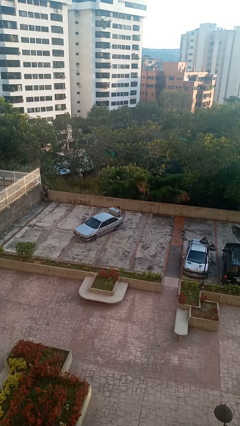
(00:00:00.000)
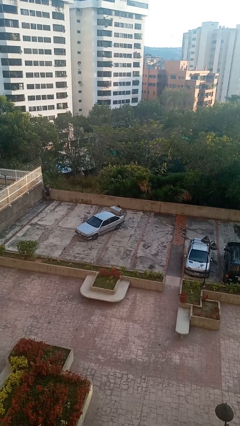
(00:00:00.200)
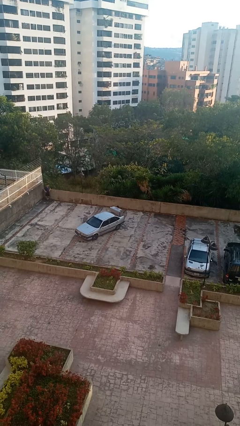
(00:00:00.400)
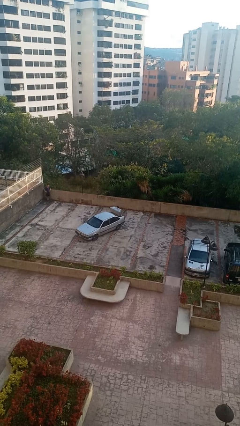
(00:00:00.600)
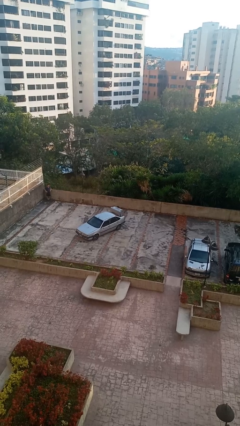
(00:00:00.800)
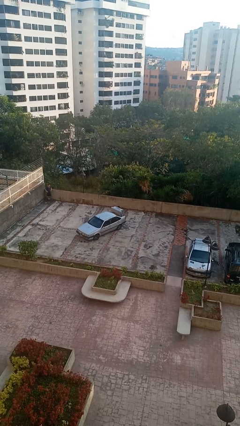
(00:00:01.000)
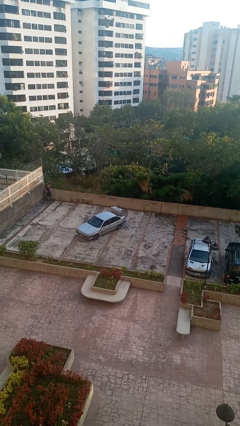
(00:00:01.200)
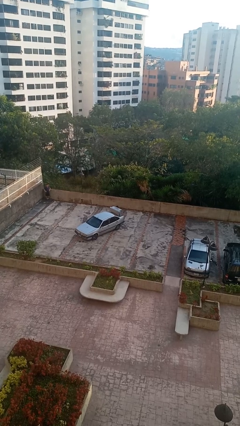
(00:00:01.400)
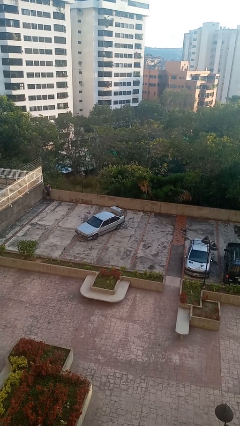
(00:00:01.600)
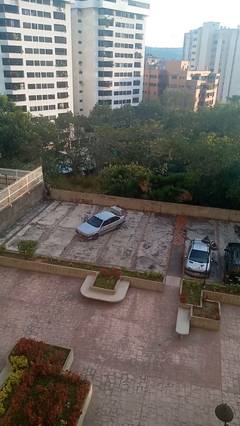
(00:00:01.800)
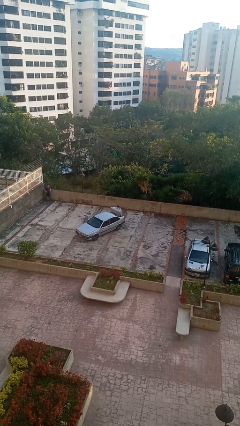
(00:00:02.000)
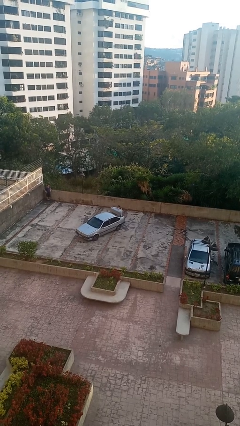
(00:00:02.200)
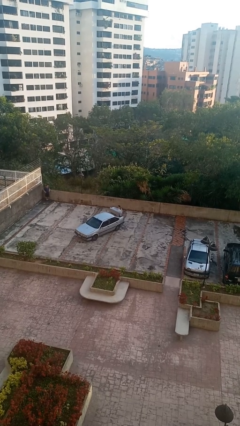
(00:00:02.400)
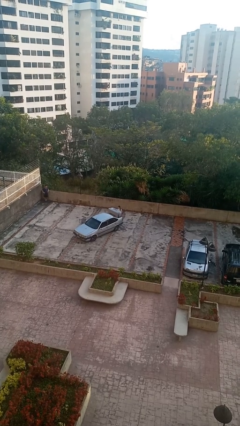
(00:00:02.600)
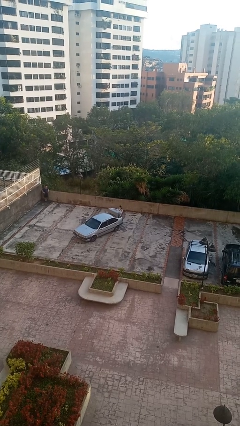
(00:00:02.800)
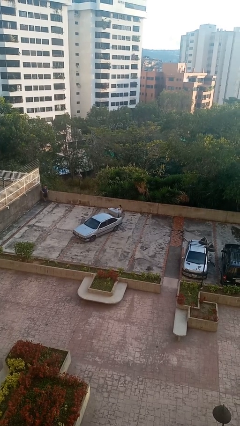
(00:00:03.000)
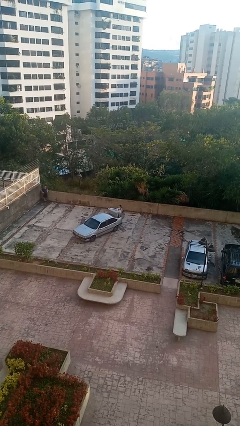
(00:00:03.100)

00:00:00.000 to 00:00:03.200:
person unloads car

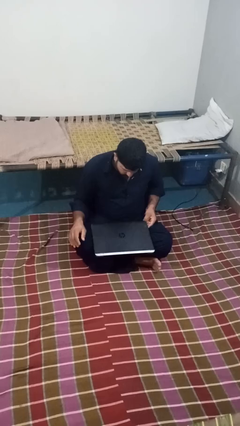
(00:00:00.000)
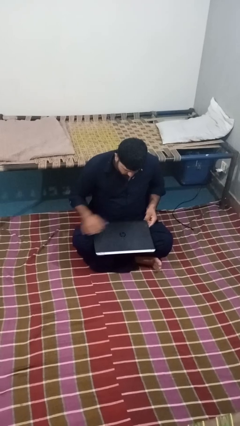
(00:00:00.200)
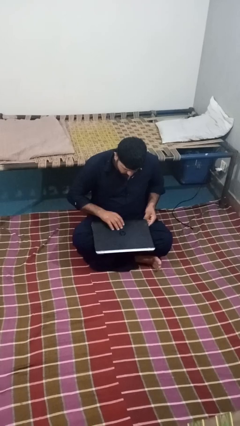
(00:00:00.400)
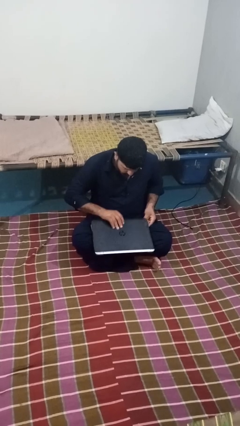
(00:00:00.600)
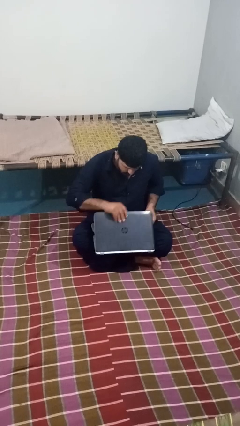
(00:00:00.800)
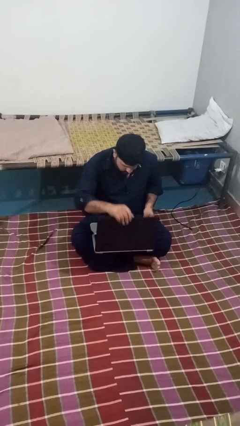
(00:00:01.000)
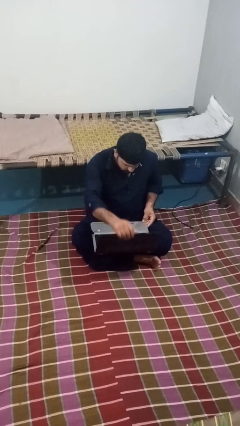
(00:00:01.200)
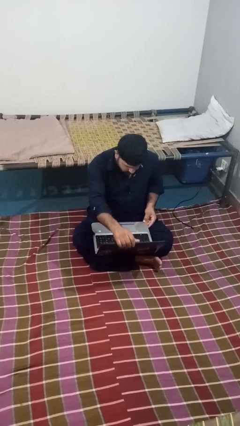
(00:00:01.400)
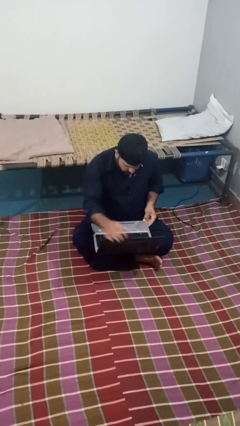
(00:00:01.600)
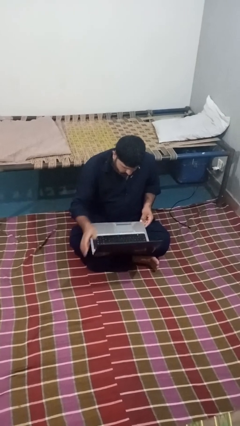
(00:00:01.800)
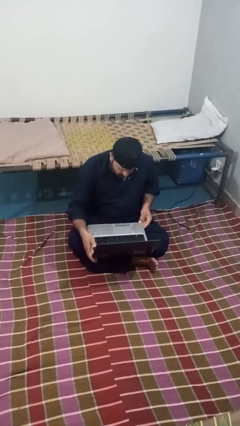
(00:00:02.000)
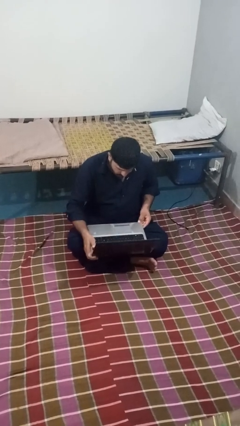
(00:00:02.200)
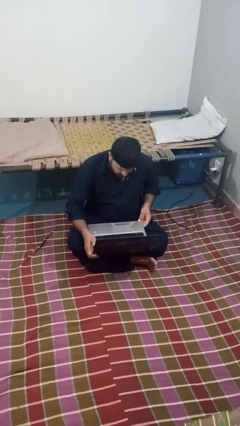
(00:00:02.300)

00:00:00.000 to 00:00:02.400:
person opens laptop

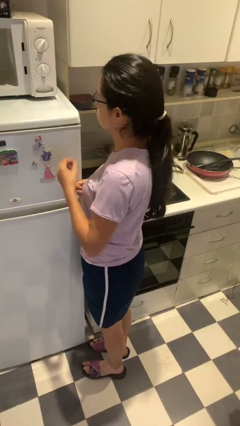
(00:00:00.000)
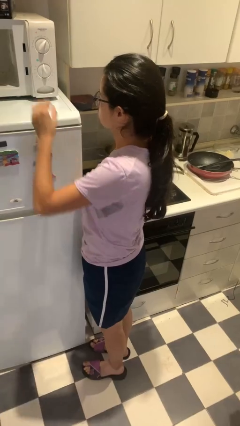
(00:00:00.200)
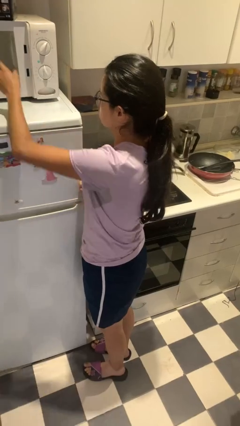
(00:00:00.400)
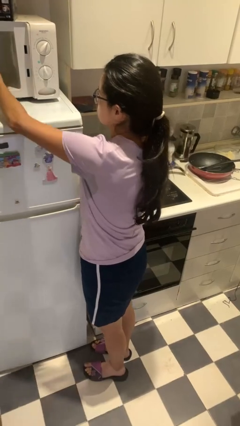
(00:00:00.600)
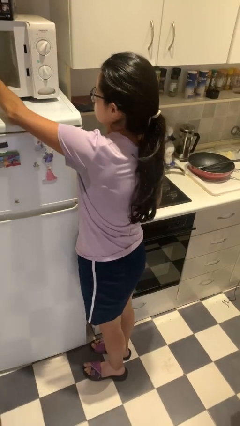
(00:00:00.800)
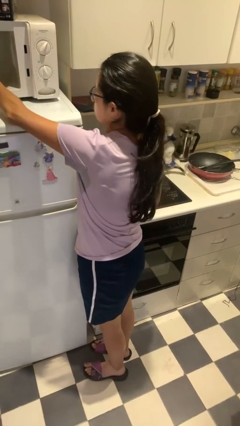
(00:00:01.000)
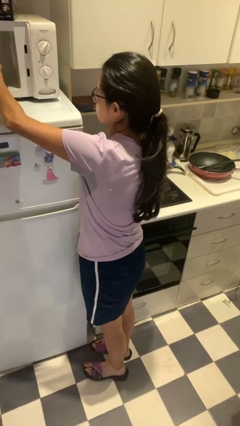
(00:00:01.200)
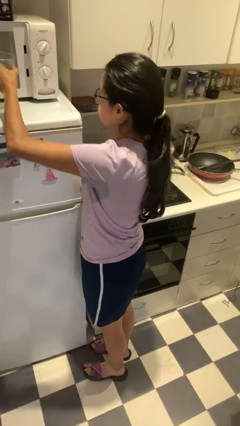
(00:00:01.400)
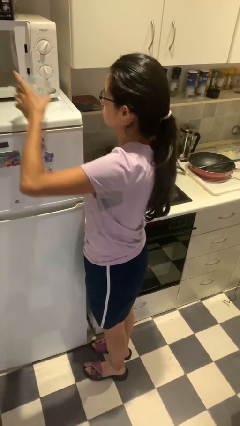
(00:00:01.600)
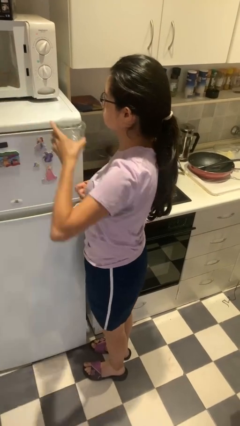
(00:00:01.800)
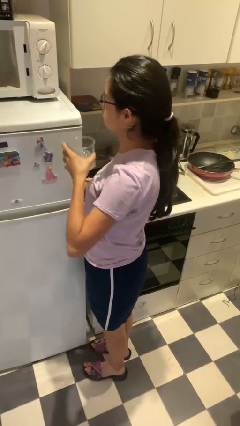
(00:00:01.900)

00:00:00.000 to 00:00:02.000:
person takes object from microwave

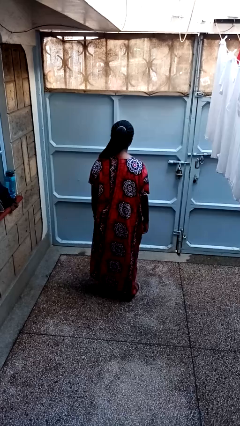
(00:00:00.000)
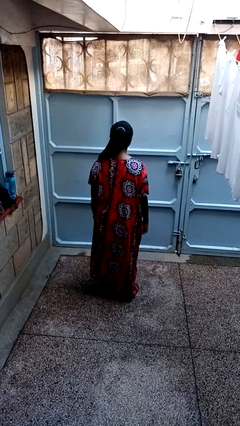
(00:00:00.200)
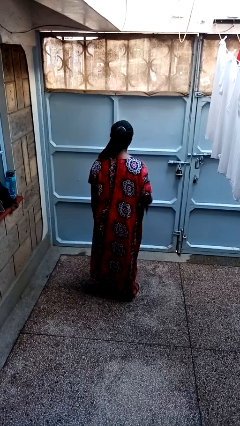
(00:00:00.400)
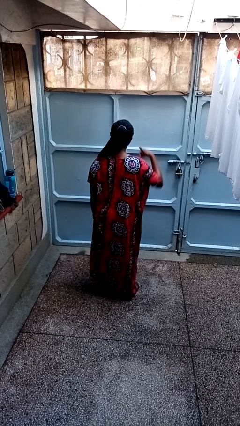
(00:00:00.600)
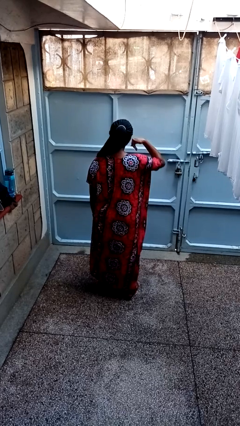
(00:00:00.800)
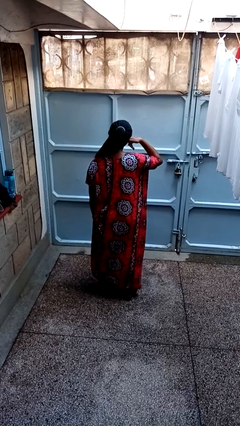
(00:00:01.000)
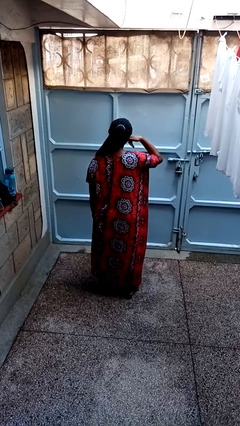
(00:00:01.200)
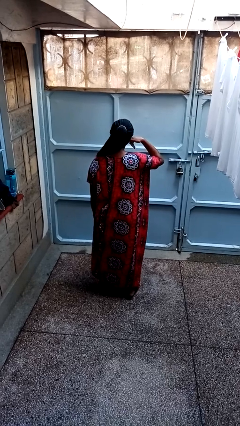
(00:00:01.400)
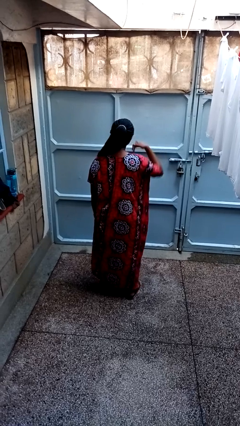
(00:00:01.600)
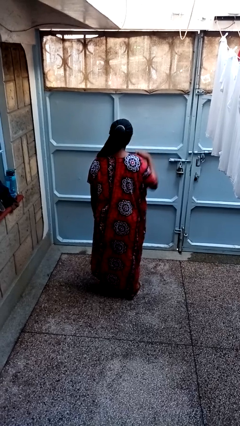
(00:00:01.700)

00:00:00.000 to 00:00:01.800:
person gestures call me

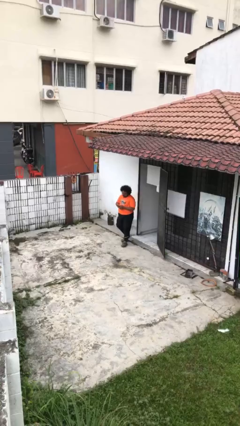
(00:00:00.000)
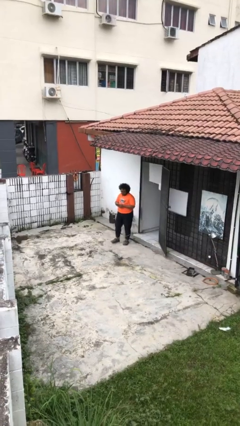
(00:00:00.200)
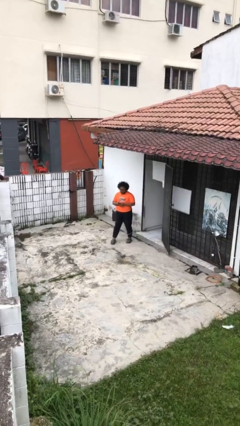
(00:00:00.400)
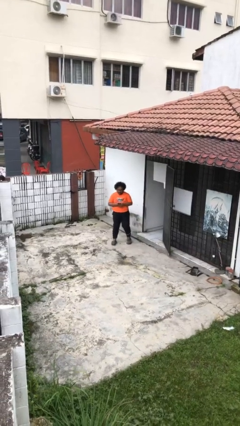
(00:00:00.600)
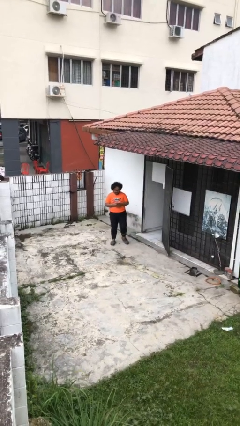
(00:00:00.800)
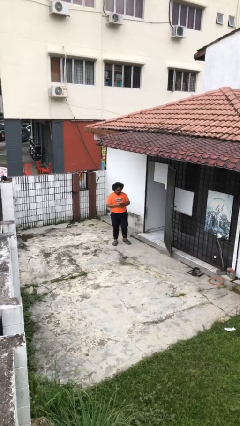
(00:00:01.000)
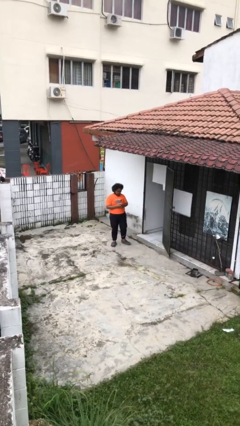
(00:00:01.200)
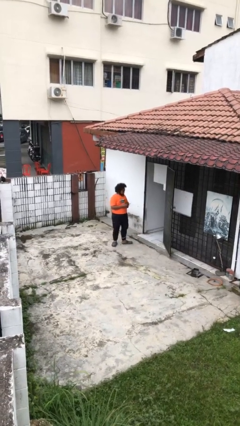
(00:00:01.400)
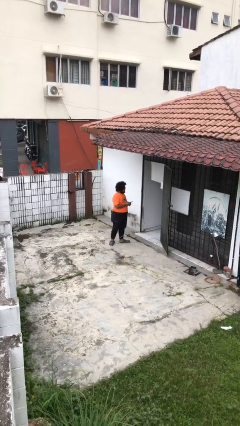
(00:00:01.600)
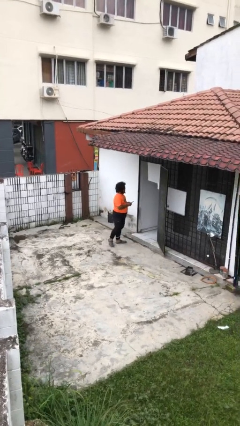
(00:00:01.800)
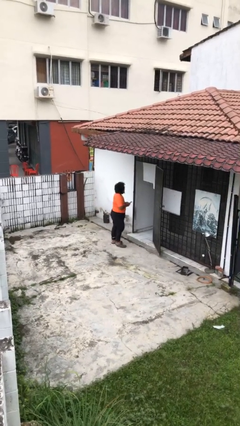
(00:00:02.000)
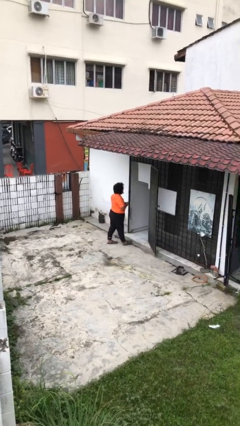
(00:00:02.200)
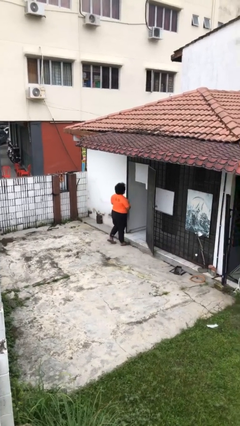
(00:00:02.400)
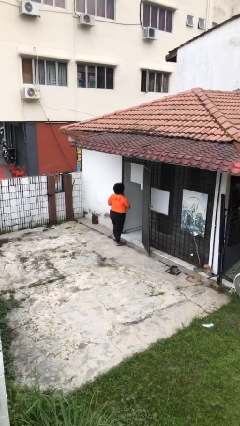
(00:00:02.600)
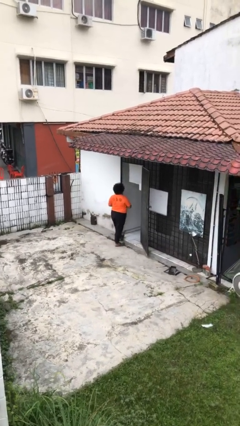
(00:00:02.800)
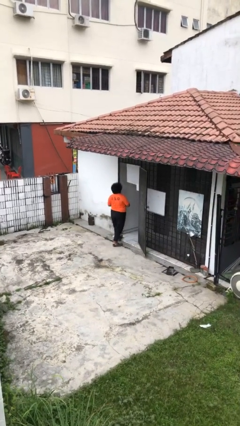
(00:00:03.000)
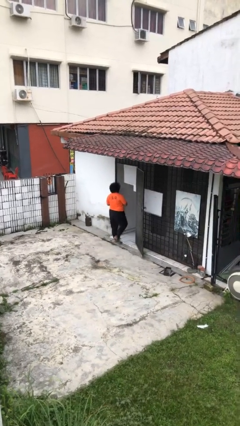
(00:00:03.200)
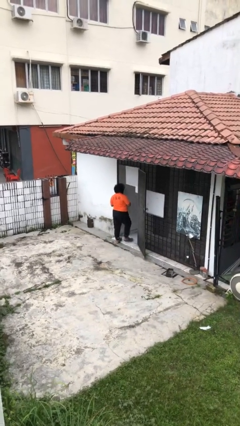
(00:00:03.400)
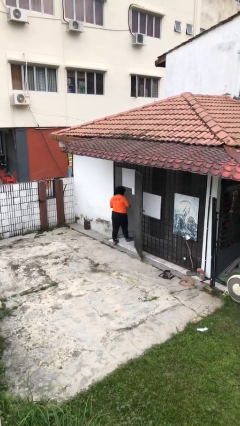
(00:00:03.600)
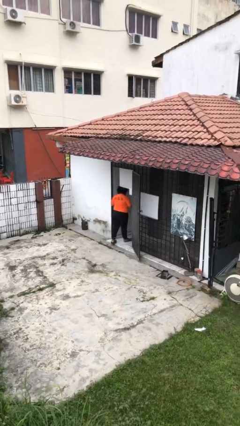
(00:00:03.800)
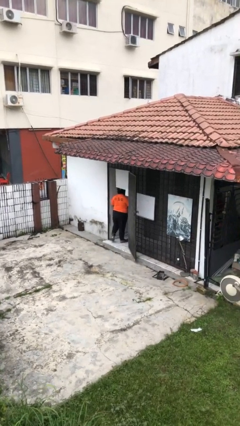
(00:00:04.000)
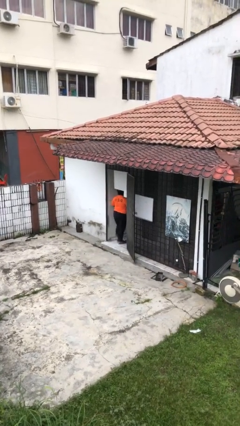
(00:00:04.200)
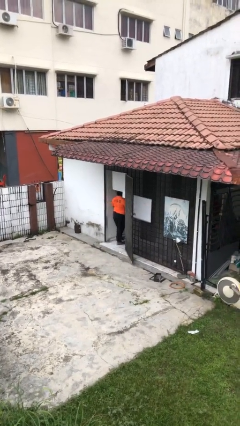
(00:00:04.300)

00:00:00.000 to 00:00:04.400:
person exits scene through structure

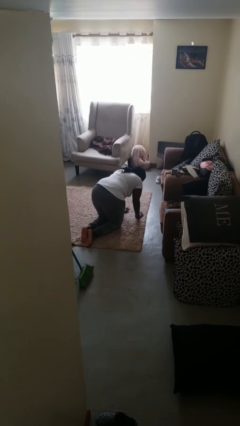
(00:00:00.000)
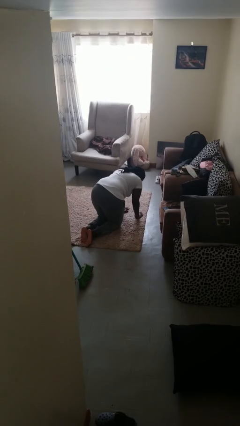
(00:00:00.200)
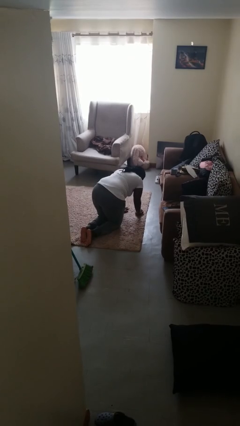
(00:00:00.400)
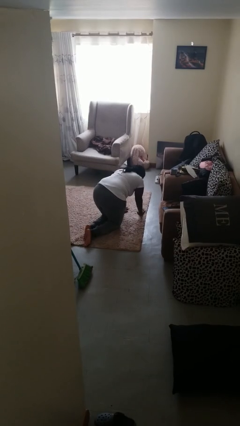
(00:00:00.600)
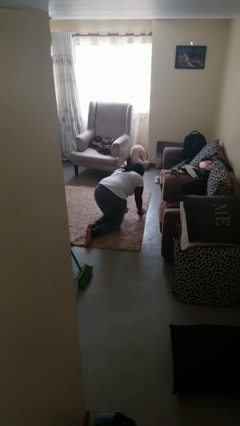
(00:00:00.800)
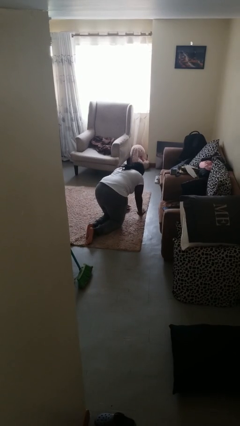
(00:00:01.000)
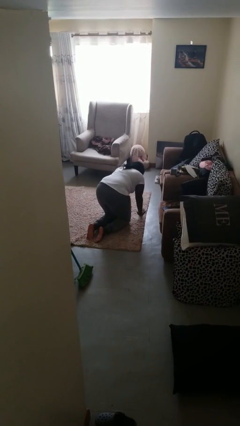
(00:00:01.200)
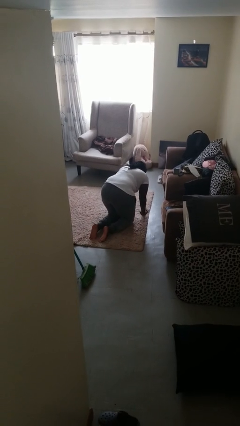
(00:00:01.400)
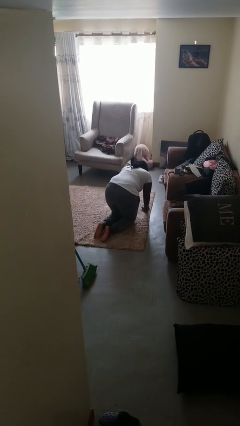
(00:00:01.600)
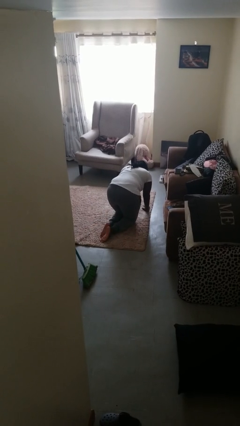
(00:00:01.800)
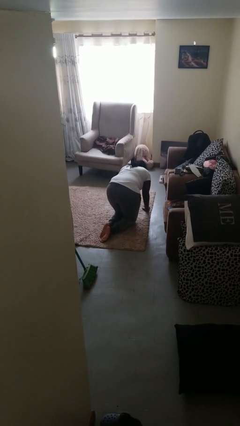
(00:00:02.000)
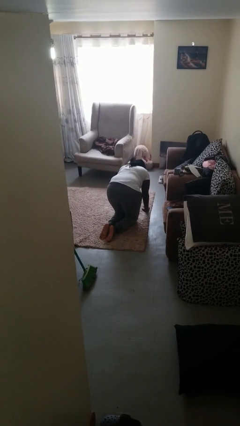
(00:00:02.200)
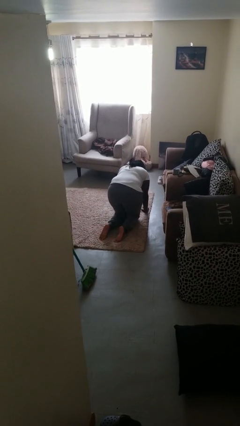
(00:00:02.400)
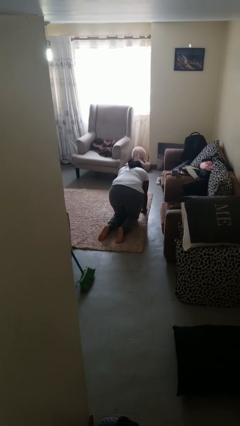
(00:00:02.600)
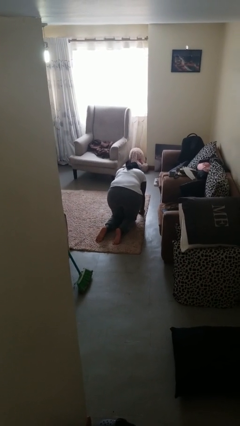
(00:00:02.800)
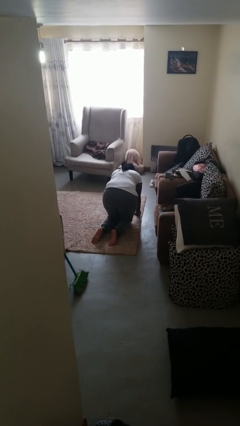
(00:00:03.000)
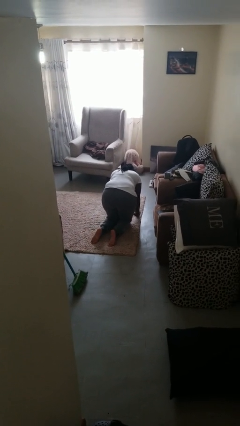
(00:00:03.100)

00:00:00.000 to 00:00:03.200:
person crawls
